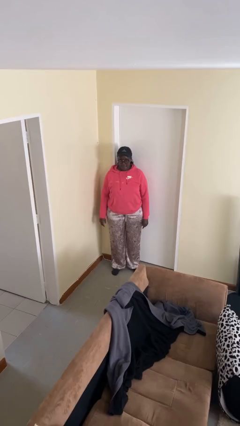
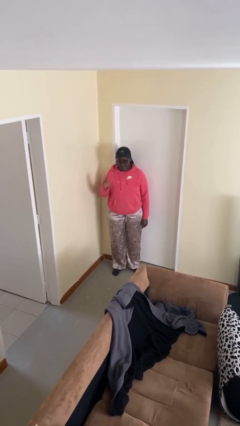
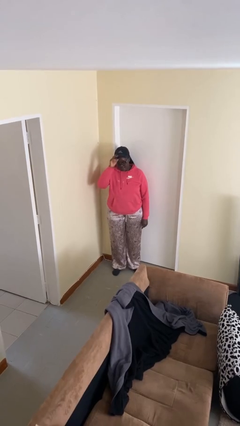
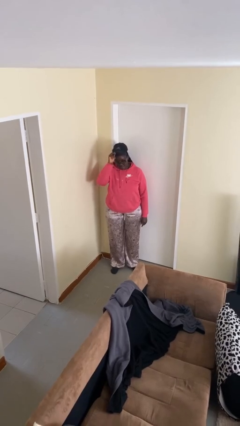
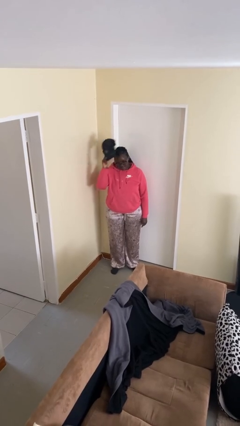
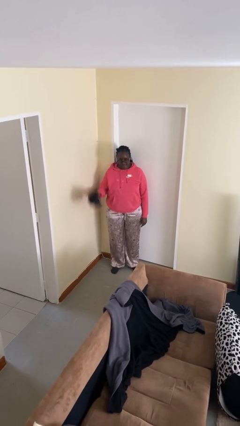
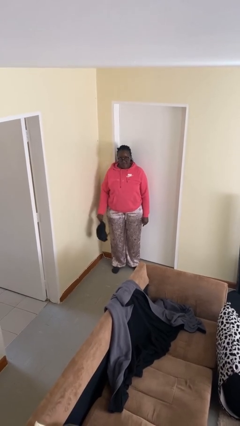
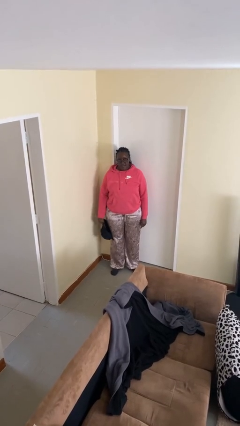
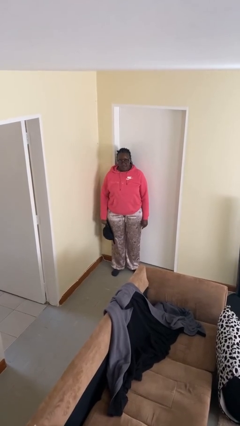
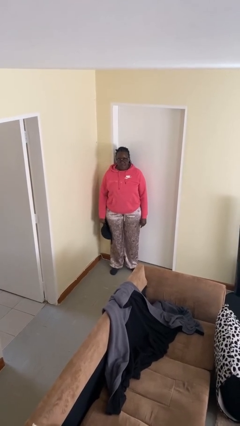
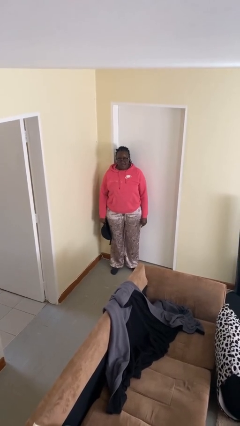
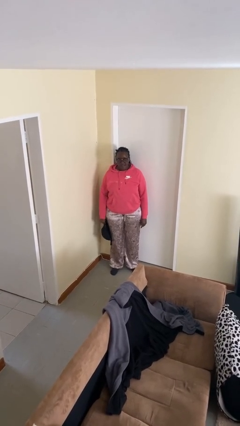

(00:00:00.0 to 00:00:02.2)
person takes off hat

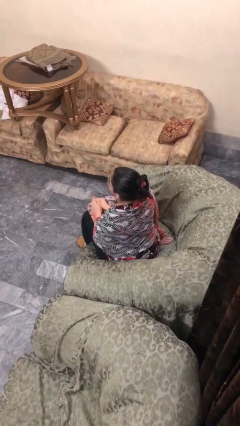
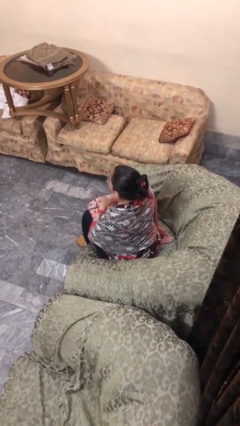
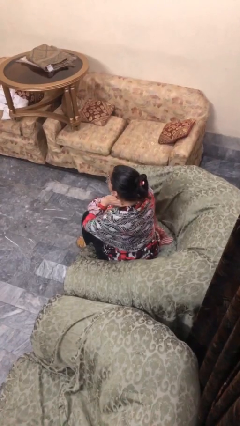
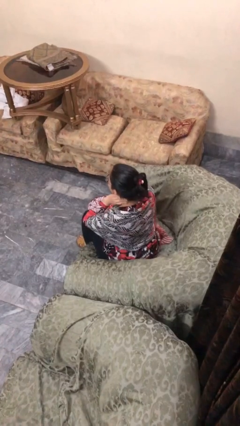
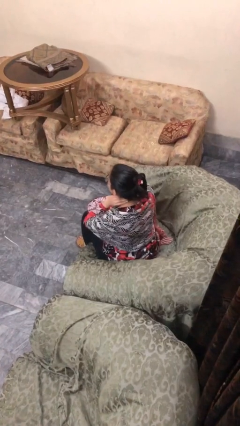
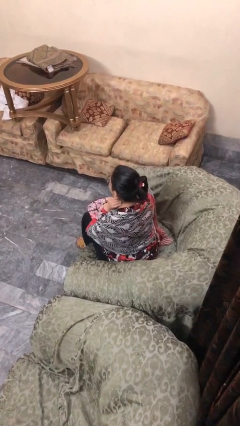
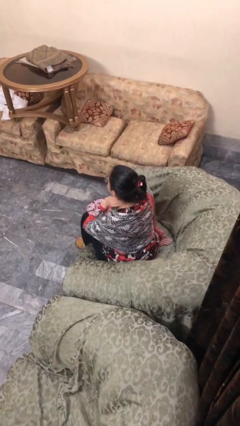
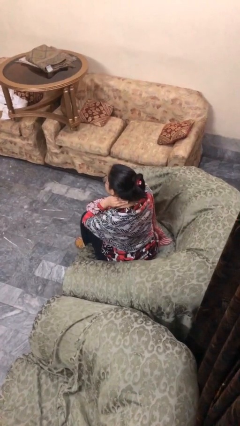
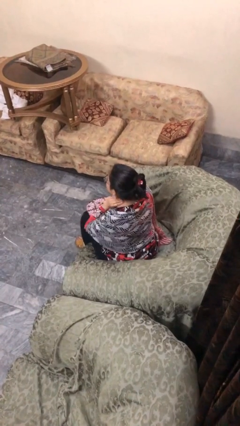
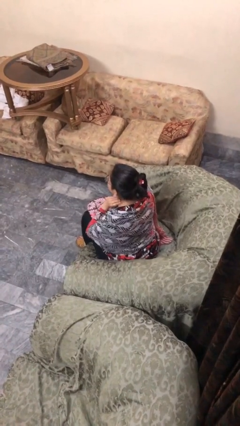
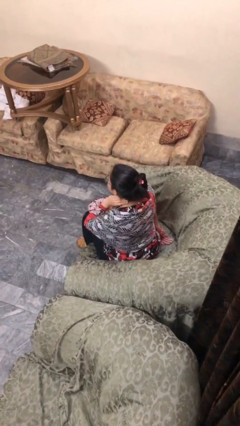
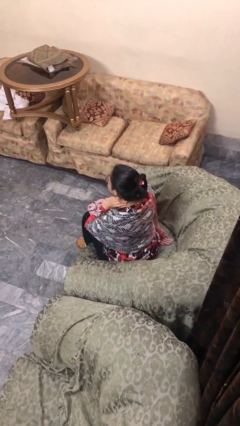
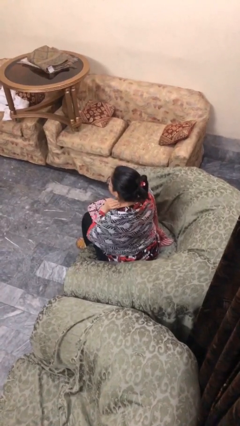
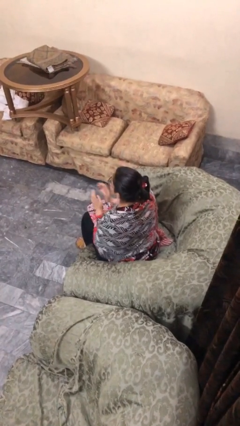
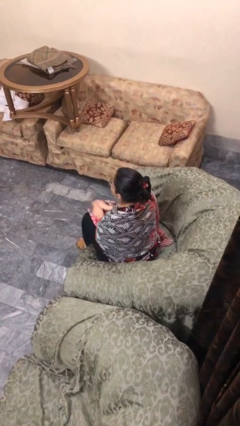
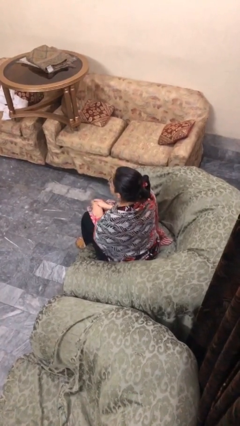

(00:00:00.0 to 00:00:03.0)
person rubs neck

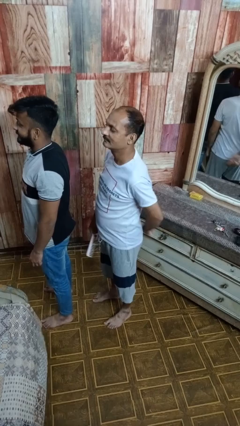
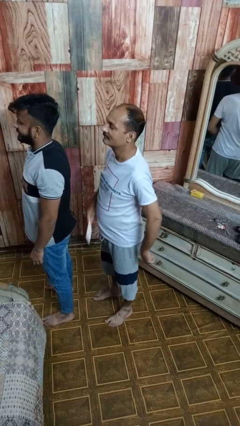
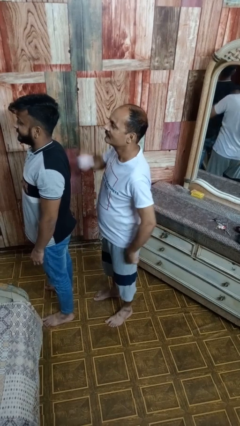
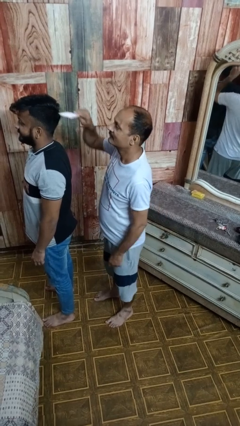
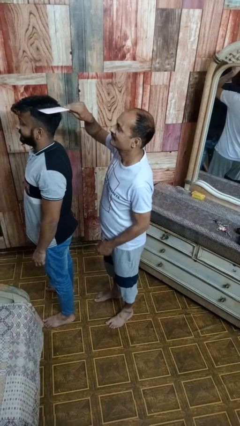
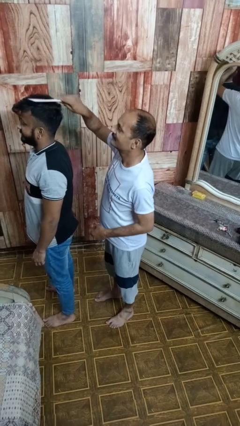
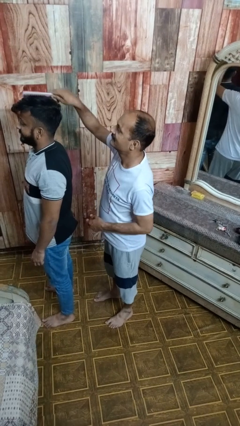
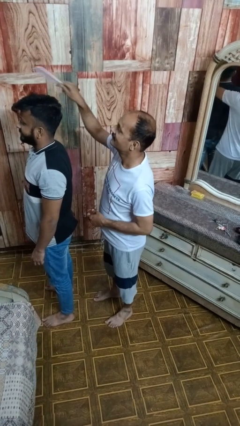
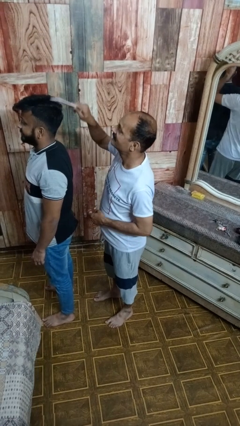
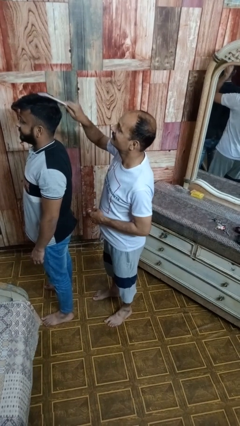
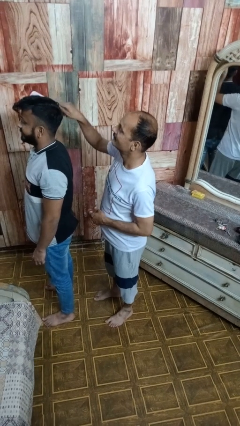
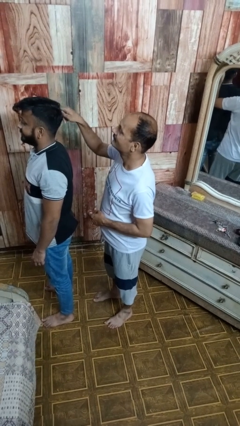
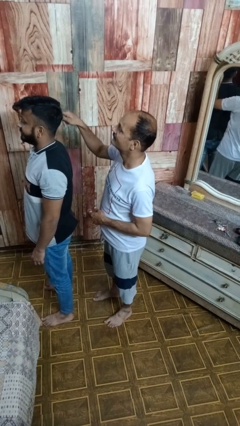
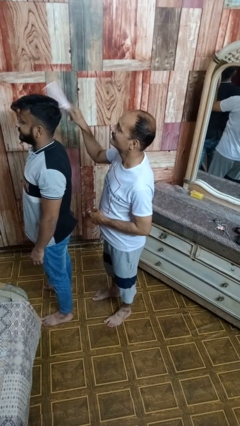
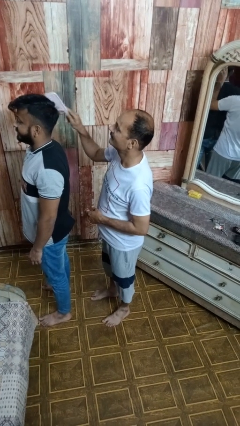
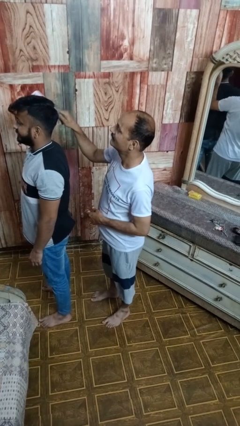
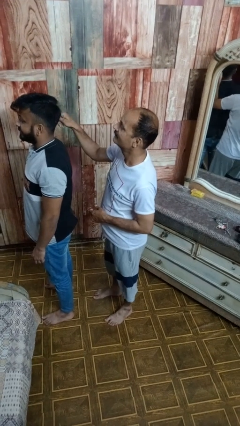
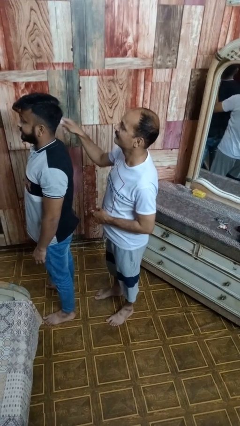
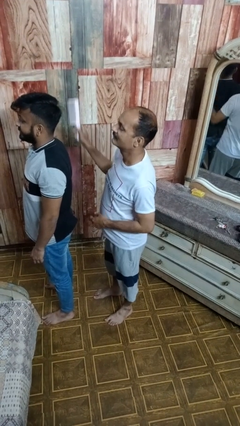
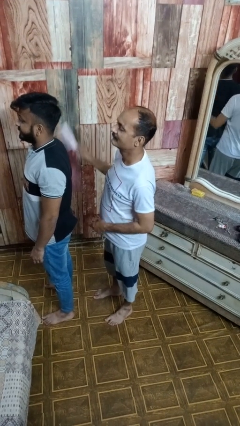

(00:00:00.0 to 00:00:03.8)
person brushes hair of person

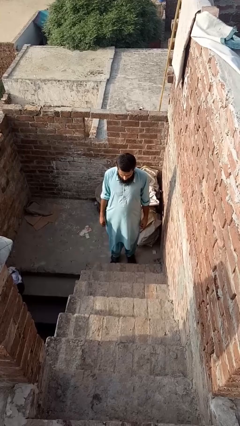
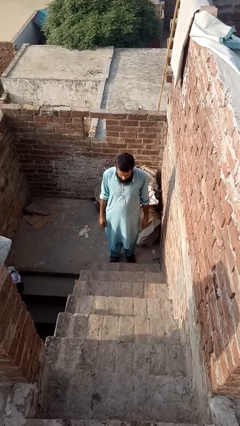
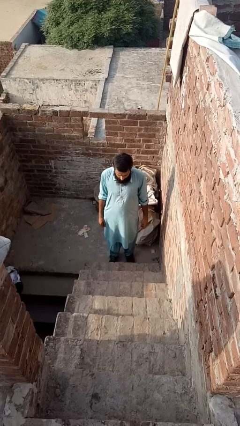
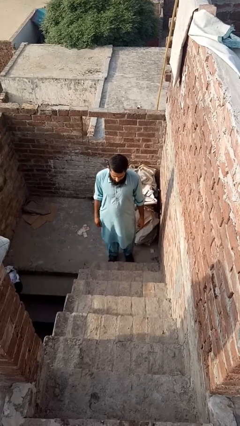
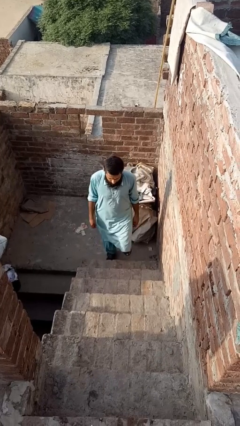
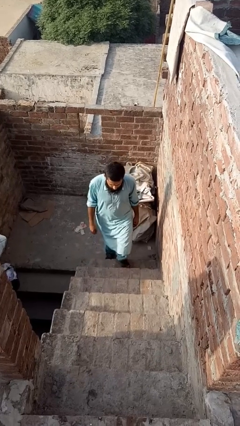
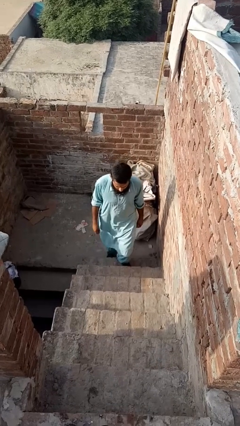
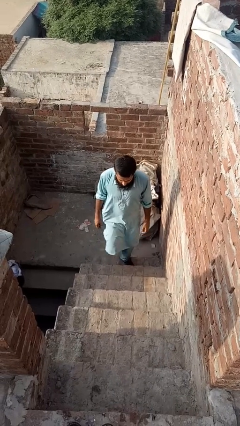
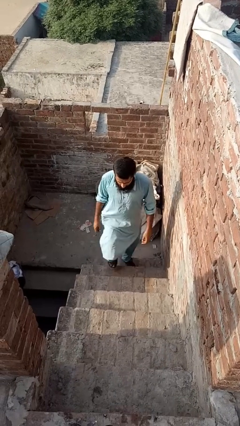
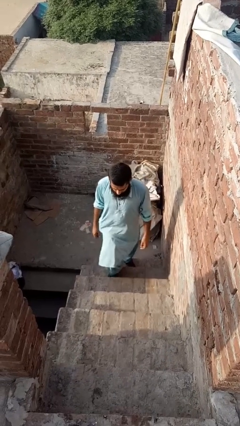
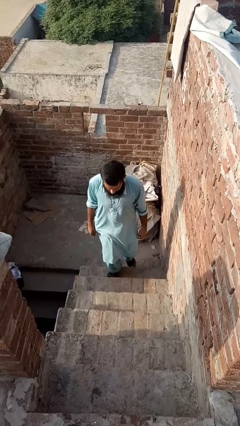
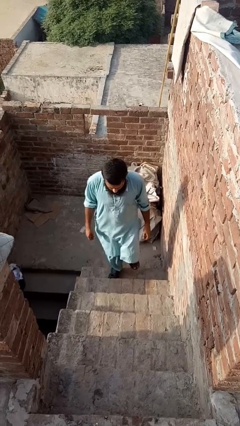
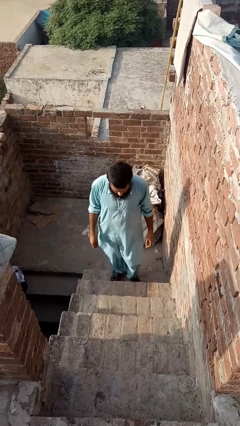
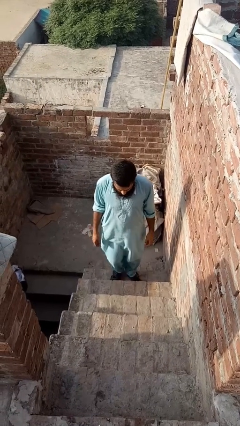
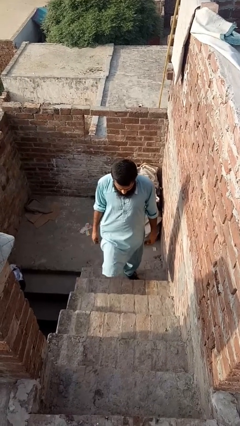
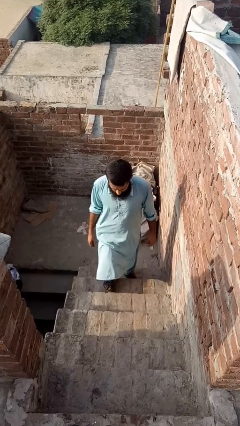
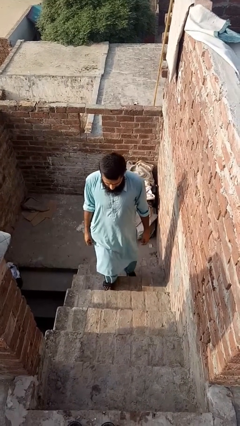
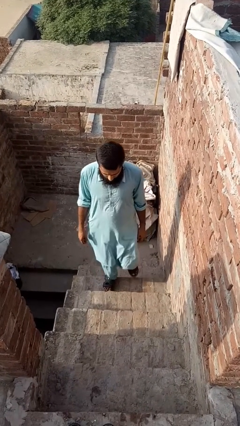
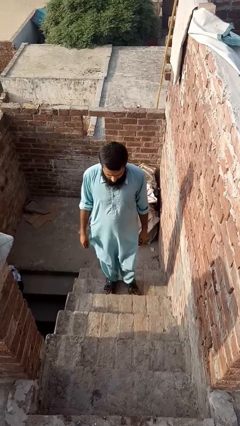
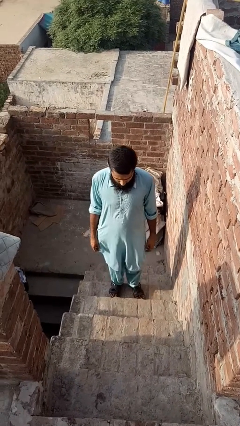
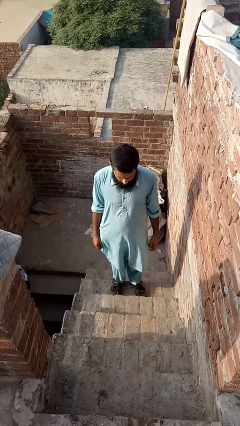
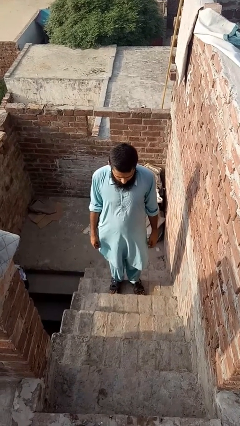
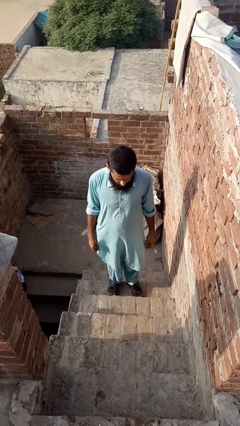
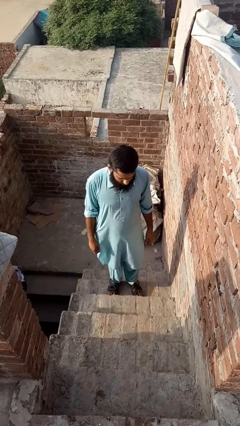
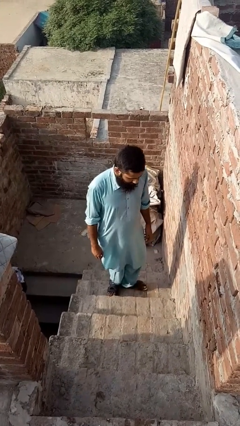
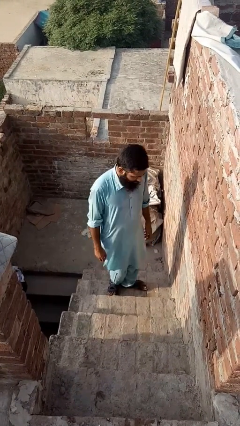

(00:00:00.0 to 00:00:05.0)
person climbs up ladder

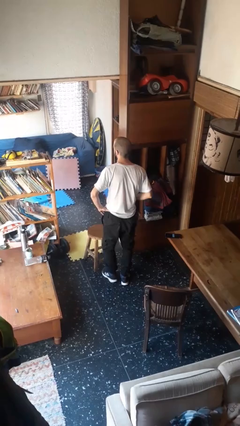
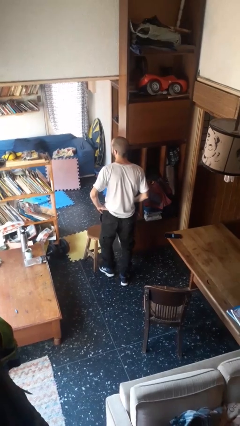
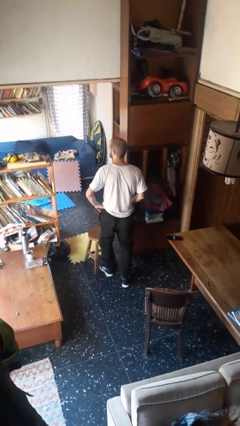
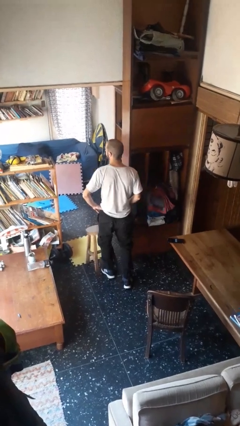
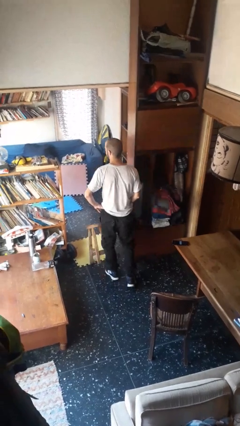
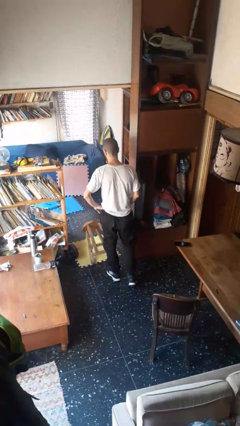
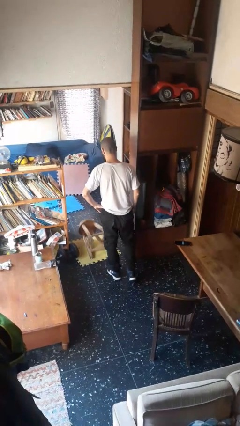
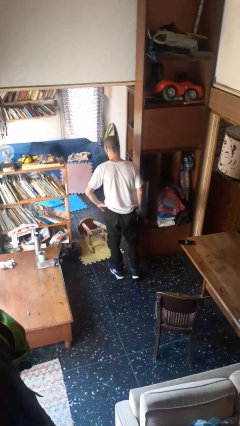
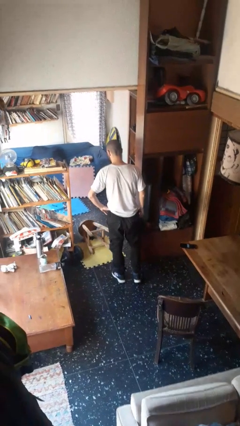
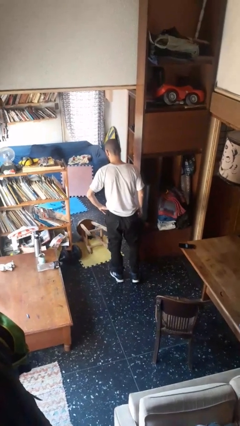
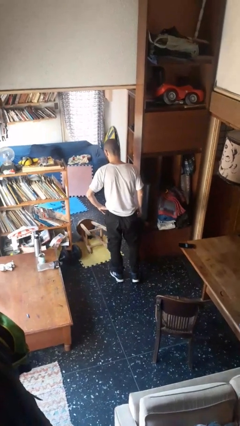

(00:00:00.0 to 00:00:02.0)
person knocks over furniture

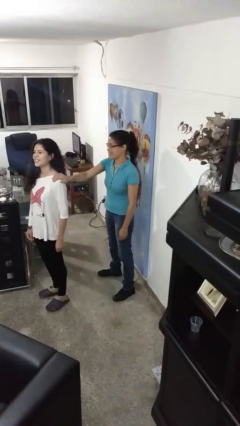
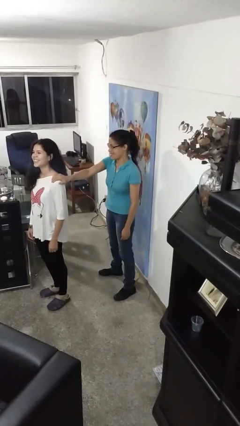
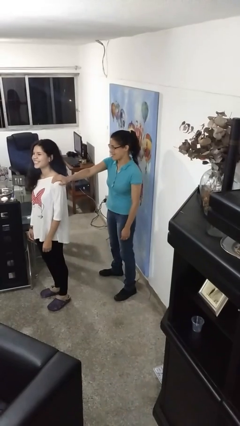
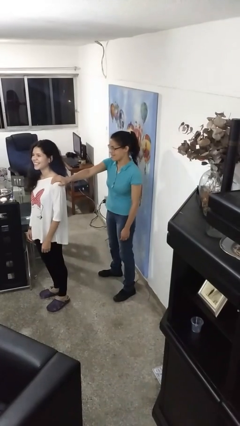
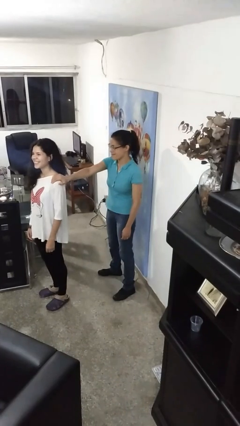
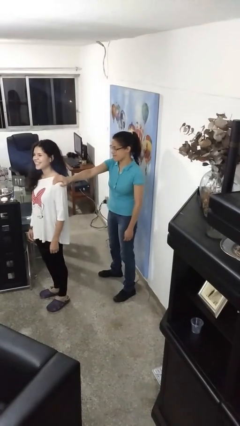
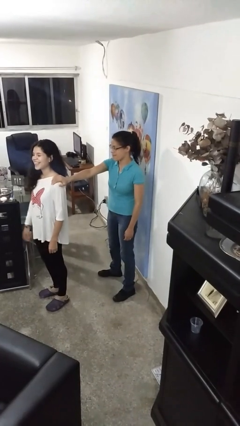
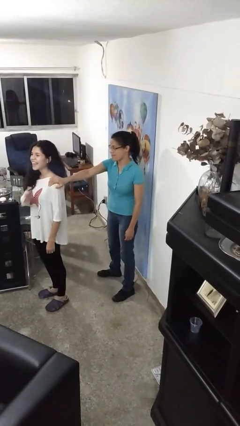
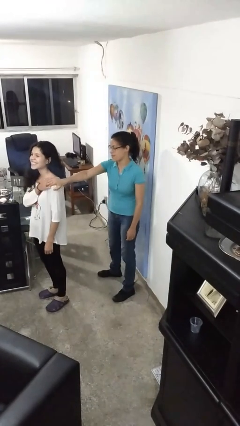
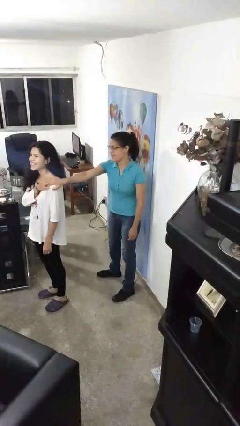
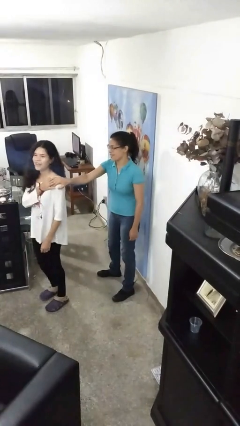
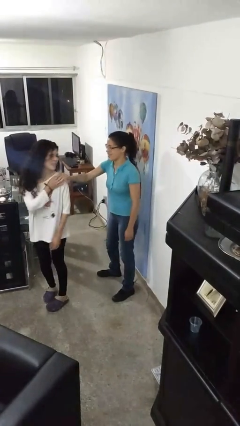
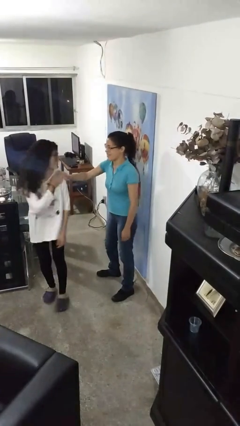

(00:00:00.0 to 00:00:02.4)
person grabs person by shoulder
